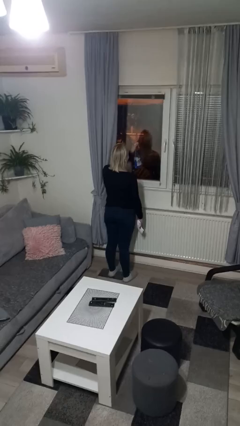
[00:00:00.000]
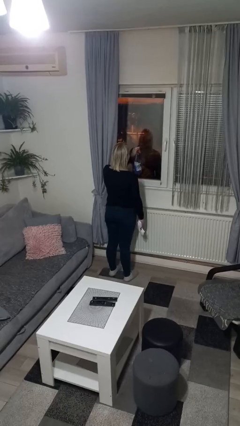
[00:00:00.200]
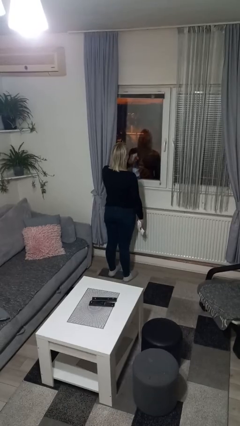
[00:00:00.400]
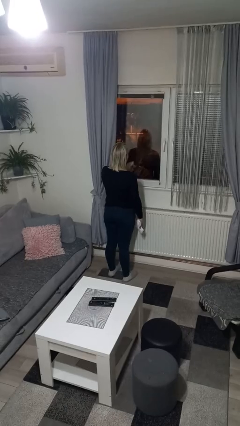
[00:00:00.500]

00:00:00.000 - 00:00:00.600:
person sprays from bottle

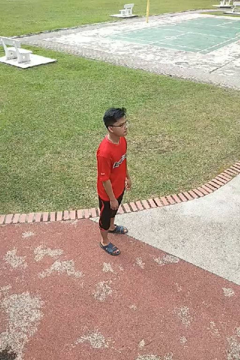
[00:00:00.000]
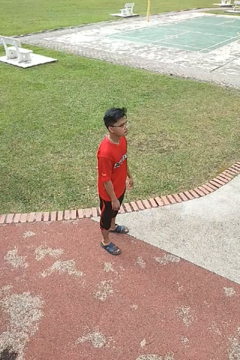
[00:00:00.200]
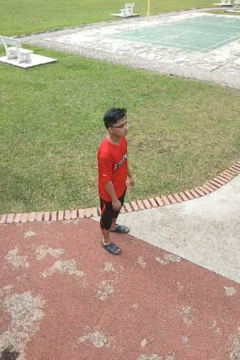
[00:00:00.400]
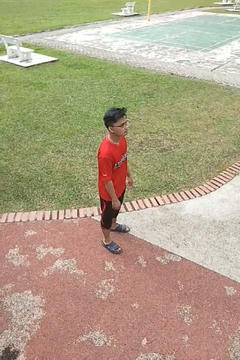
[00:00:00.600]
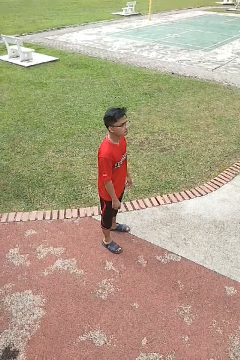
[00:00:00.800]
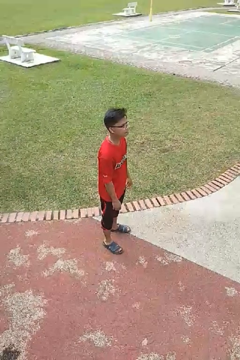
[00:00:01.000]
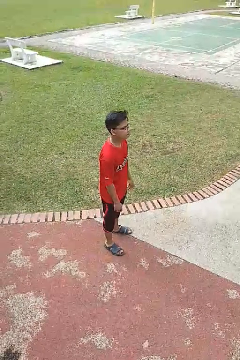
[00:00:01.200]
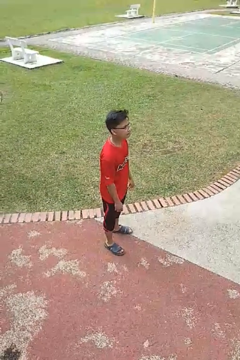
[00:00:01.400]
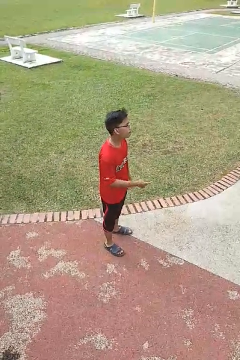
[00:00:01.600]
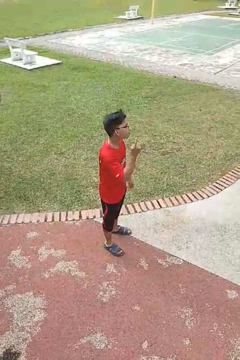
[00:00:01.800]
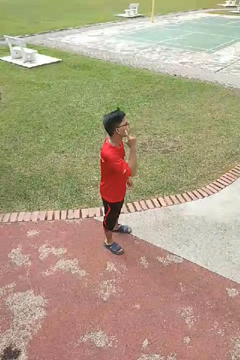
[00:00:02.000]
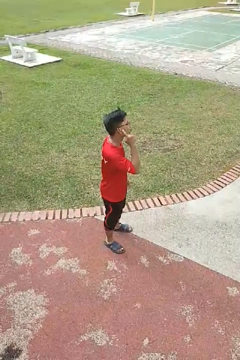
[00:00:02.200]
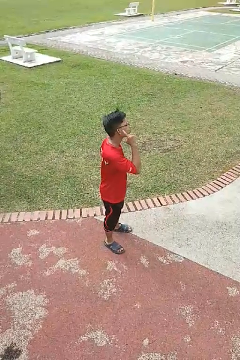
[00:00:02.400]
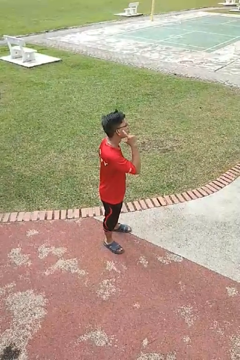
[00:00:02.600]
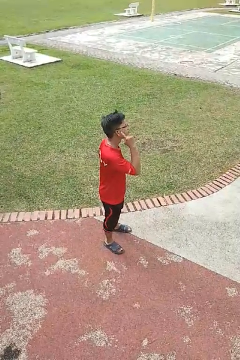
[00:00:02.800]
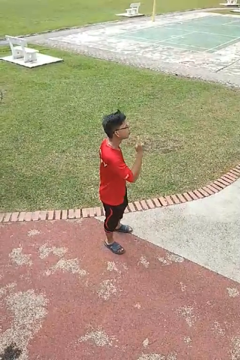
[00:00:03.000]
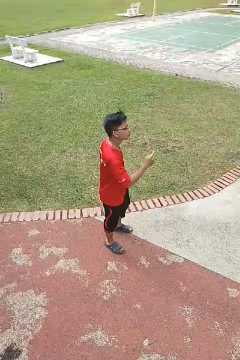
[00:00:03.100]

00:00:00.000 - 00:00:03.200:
person gestures listen closely

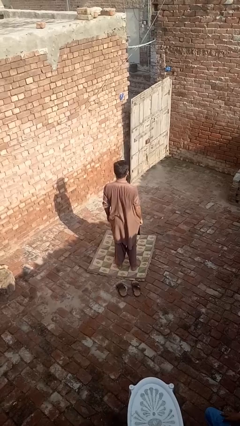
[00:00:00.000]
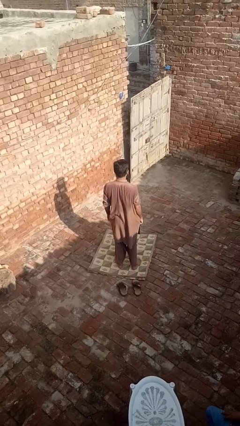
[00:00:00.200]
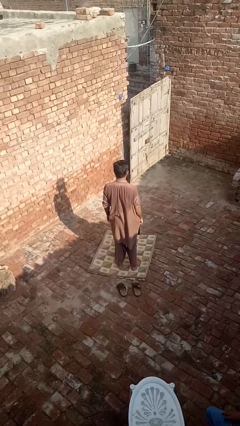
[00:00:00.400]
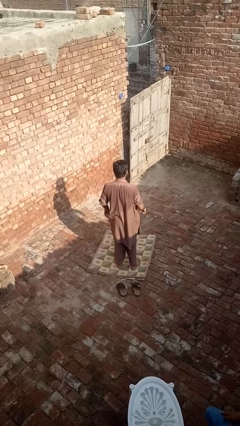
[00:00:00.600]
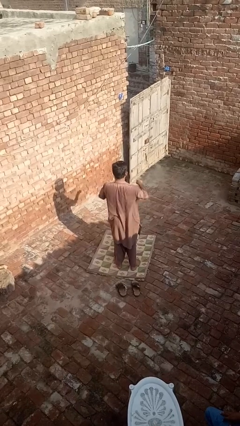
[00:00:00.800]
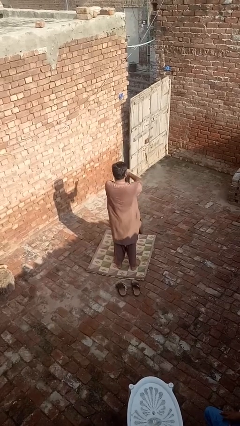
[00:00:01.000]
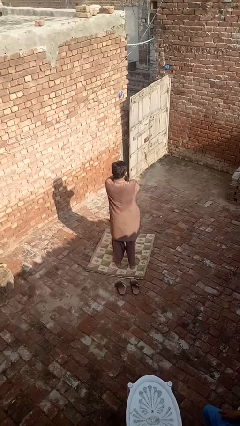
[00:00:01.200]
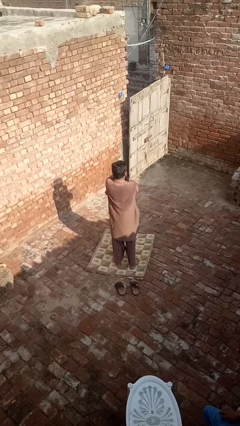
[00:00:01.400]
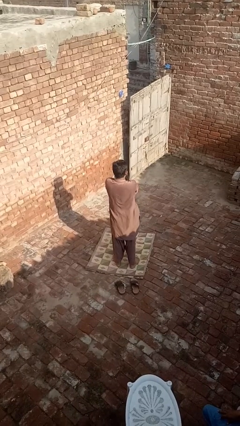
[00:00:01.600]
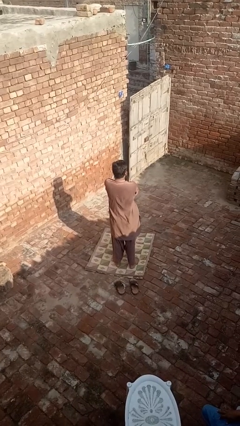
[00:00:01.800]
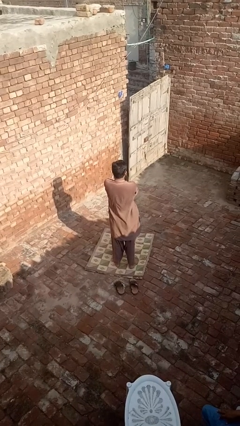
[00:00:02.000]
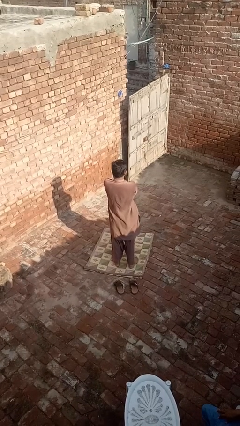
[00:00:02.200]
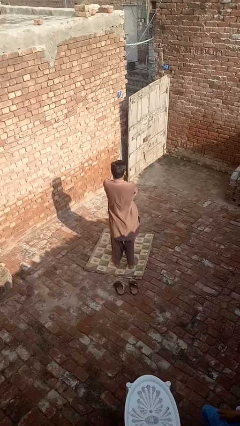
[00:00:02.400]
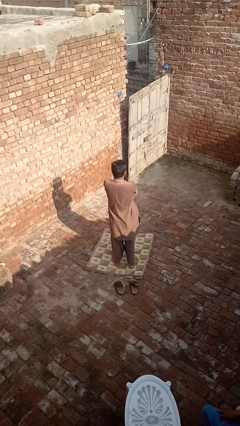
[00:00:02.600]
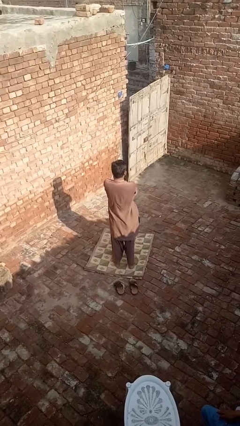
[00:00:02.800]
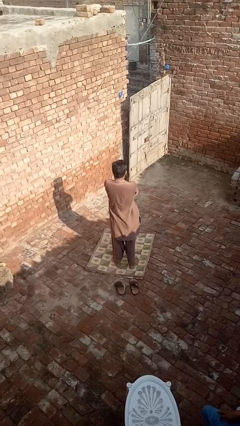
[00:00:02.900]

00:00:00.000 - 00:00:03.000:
person crosses arms

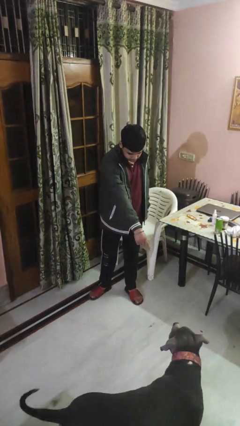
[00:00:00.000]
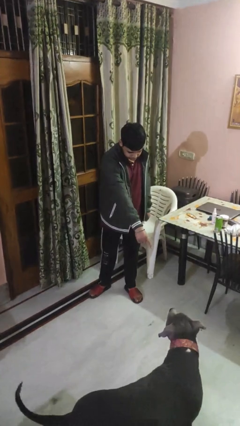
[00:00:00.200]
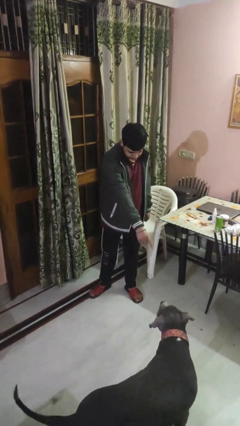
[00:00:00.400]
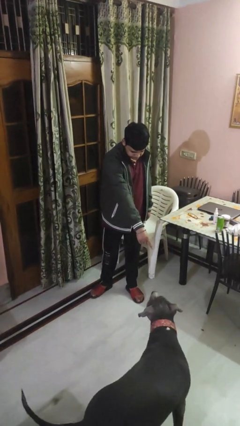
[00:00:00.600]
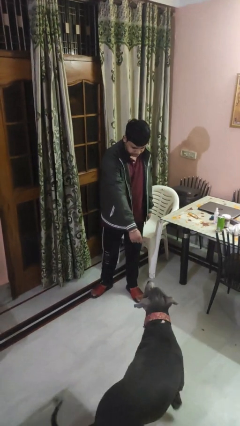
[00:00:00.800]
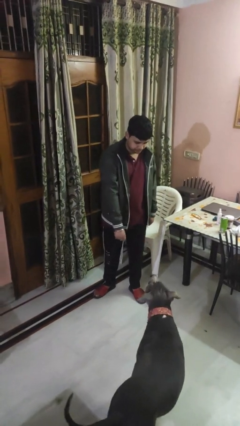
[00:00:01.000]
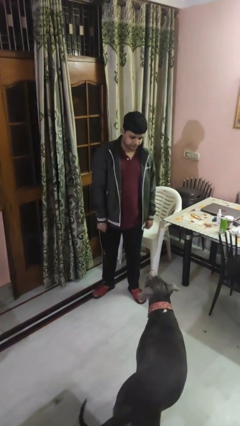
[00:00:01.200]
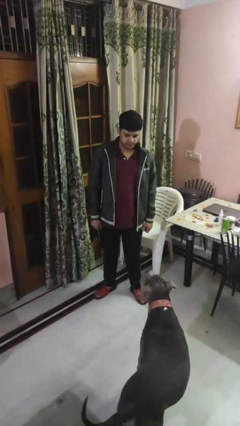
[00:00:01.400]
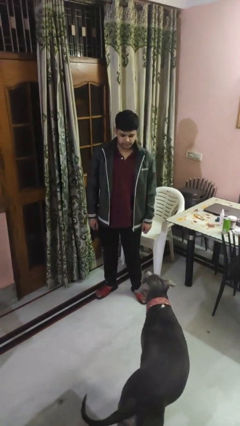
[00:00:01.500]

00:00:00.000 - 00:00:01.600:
person points to dog

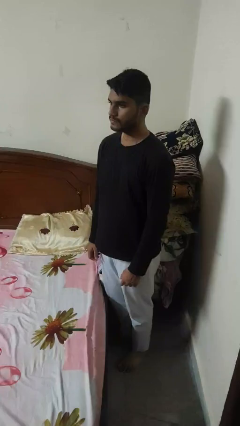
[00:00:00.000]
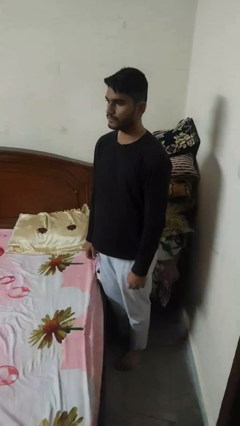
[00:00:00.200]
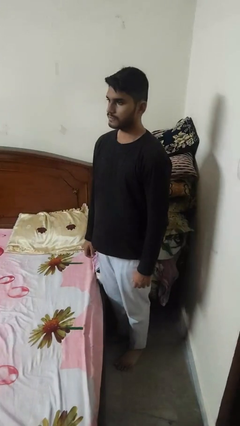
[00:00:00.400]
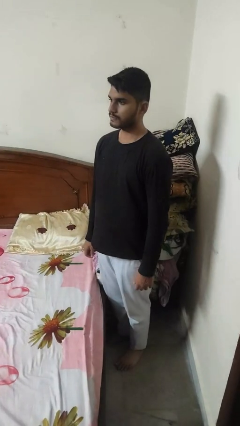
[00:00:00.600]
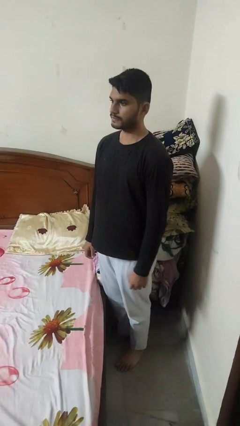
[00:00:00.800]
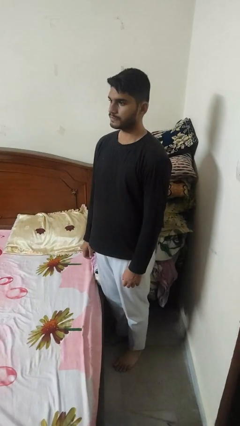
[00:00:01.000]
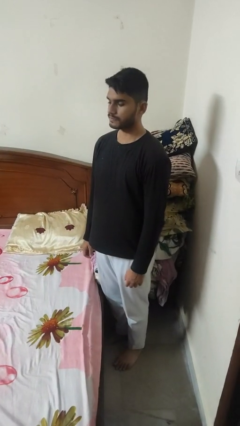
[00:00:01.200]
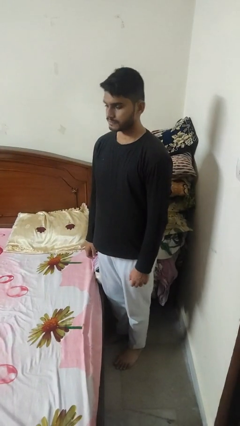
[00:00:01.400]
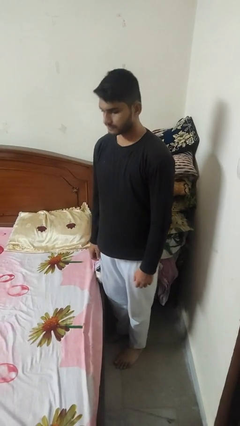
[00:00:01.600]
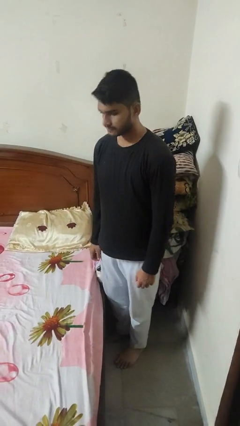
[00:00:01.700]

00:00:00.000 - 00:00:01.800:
person stands up

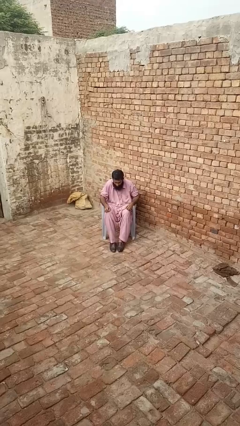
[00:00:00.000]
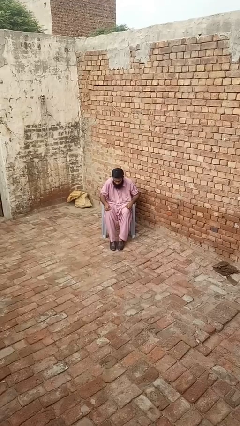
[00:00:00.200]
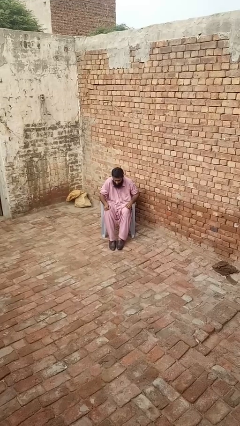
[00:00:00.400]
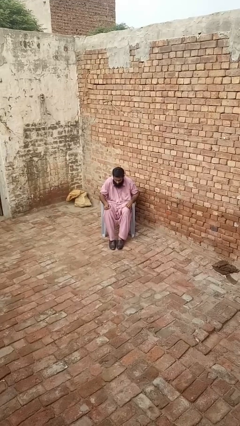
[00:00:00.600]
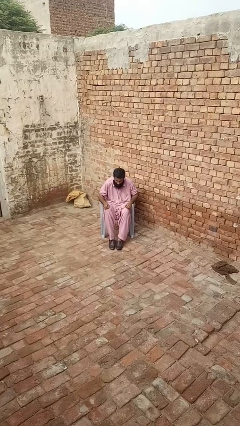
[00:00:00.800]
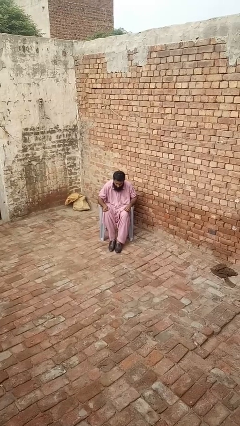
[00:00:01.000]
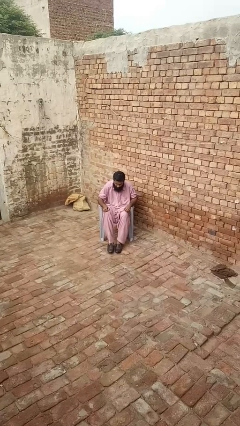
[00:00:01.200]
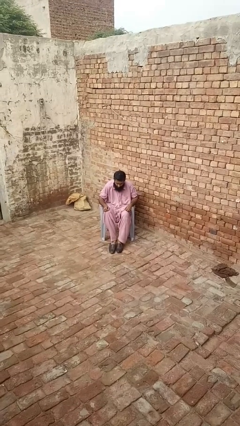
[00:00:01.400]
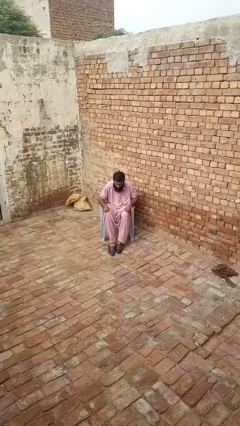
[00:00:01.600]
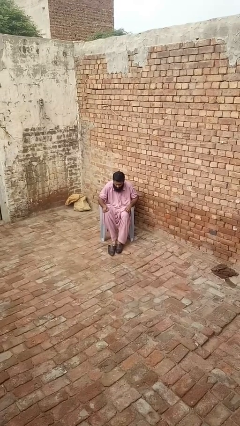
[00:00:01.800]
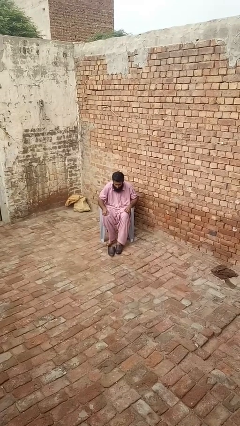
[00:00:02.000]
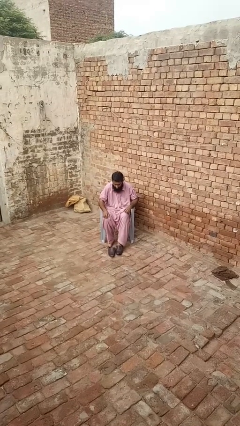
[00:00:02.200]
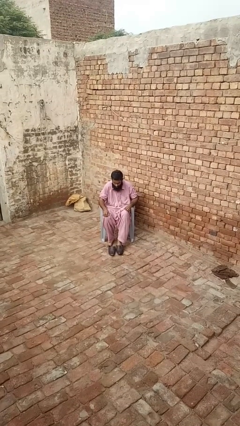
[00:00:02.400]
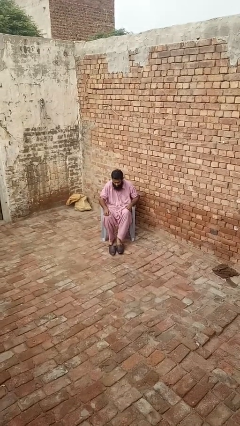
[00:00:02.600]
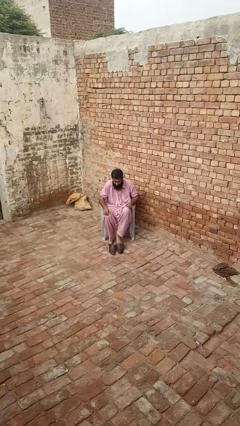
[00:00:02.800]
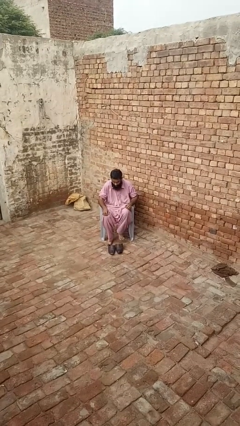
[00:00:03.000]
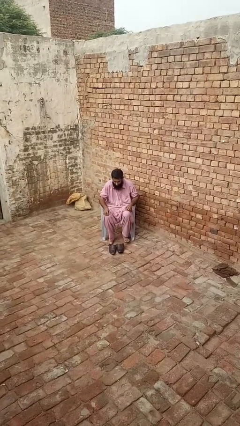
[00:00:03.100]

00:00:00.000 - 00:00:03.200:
person takes off shoes

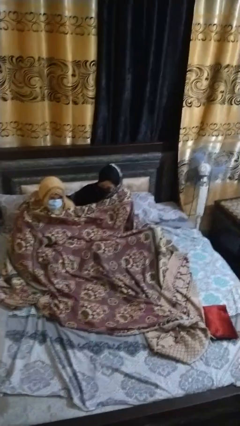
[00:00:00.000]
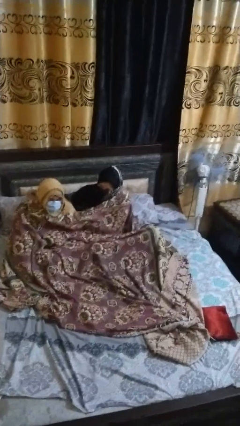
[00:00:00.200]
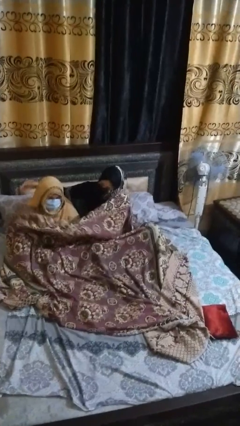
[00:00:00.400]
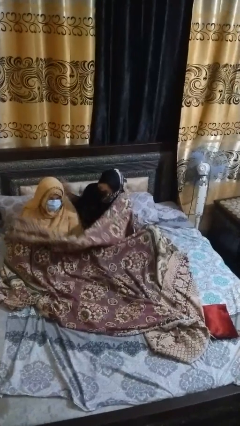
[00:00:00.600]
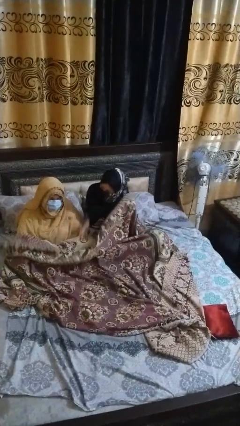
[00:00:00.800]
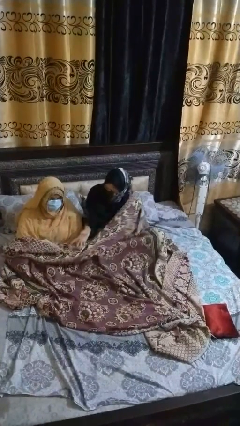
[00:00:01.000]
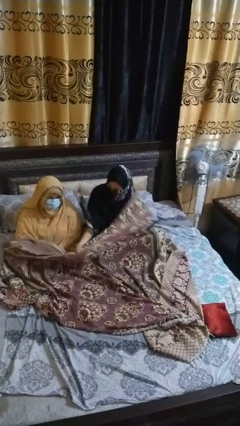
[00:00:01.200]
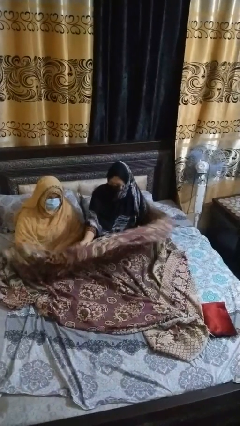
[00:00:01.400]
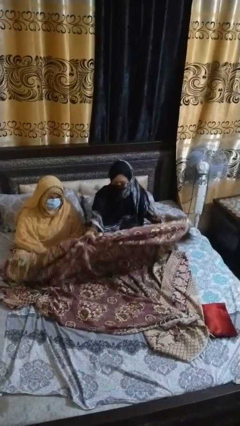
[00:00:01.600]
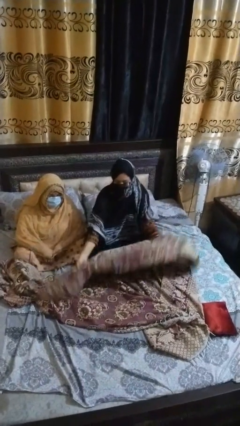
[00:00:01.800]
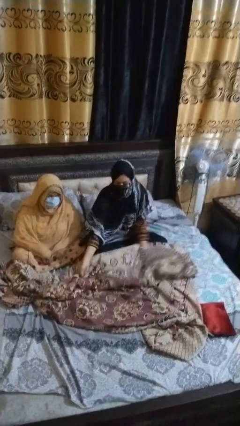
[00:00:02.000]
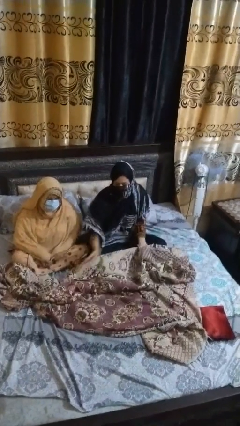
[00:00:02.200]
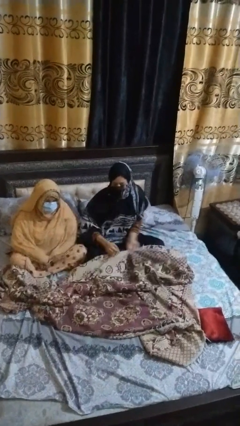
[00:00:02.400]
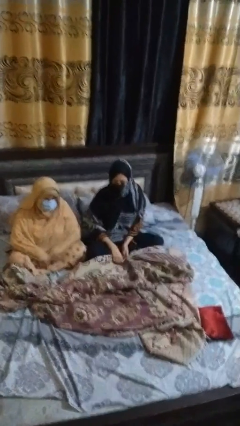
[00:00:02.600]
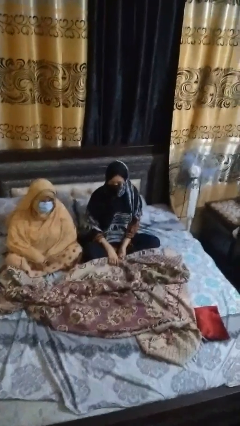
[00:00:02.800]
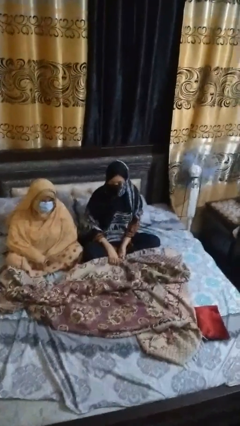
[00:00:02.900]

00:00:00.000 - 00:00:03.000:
person uncovers friend with blanket

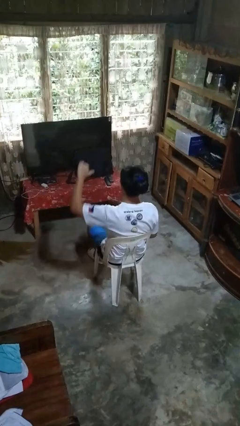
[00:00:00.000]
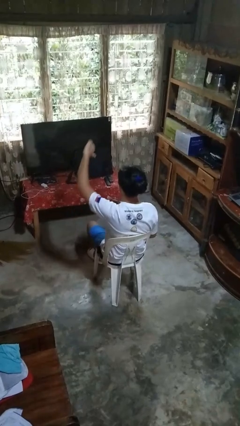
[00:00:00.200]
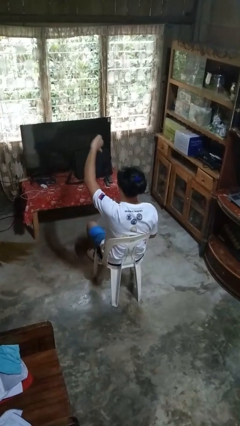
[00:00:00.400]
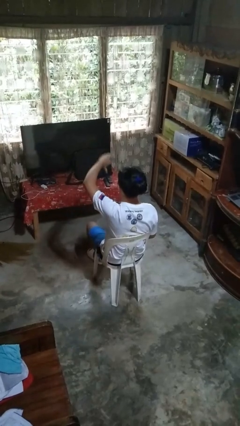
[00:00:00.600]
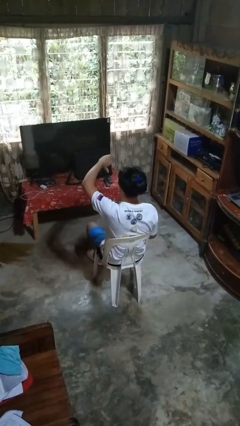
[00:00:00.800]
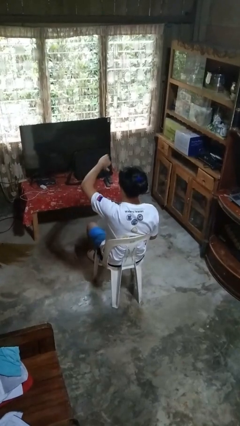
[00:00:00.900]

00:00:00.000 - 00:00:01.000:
person gestures thumbs down
